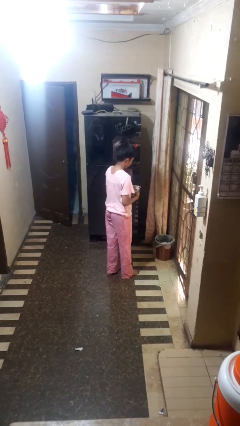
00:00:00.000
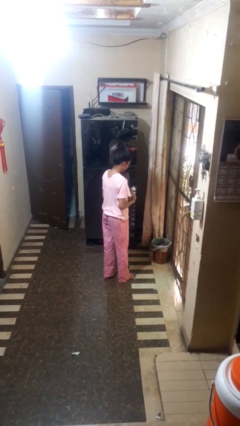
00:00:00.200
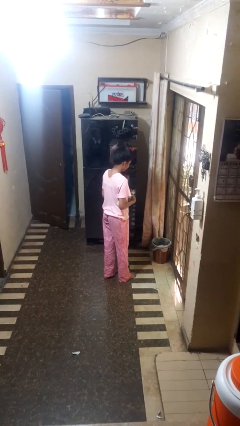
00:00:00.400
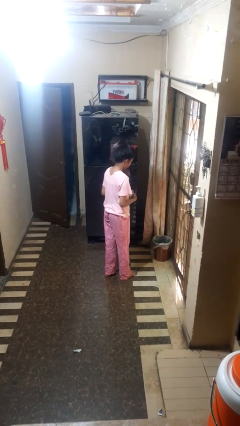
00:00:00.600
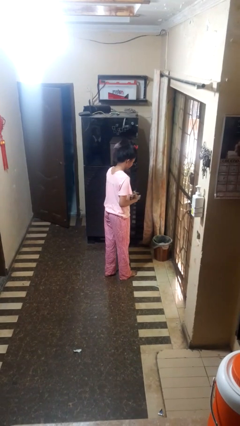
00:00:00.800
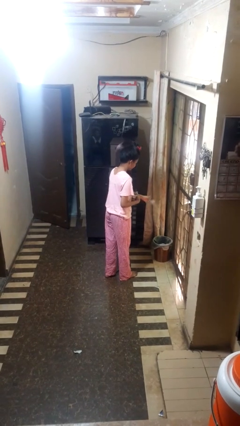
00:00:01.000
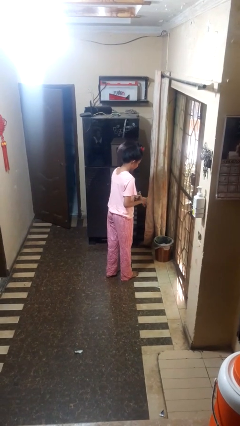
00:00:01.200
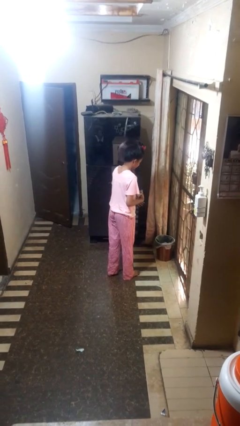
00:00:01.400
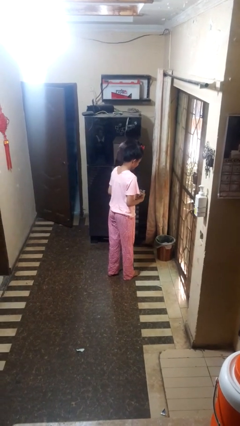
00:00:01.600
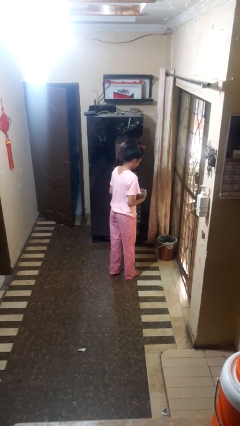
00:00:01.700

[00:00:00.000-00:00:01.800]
person discards trash

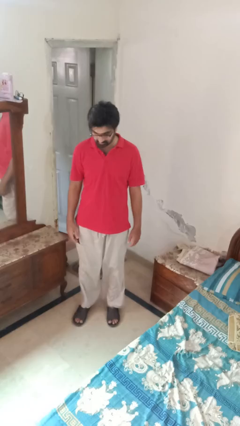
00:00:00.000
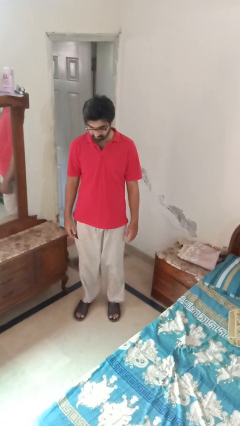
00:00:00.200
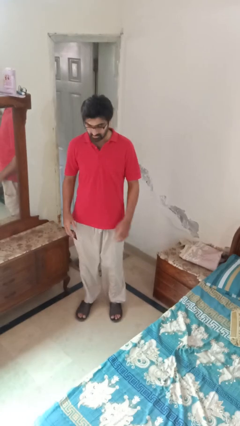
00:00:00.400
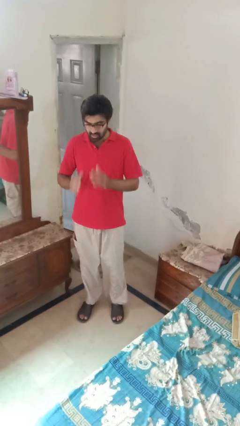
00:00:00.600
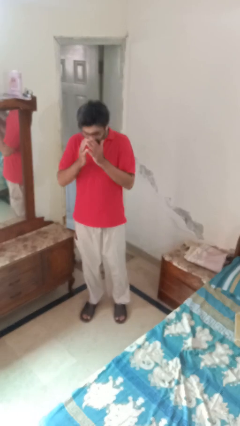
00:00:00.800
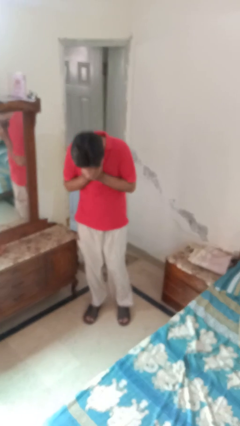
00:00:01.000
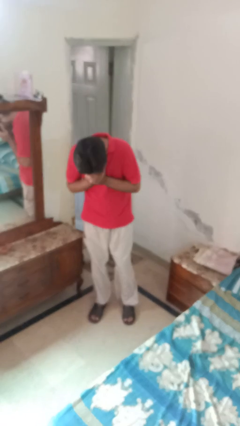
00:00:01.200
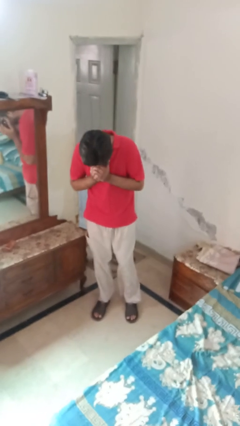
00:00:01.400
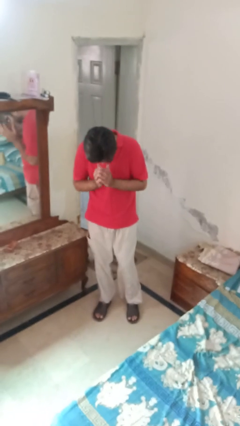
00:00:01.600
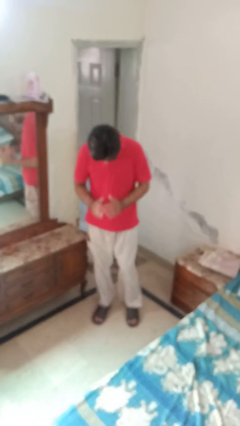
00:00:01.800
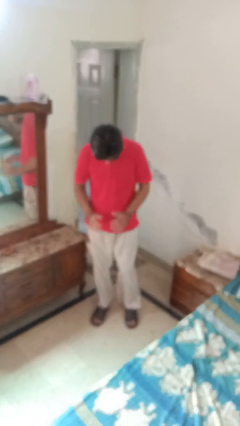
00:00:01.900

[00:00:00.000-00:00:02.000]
person sneezes into hand

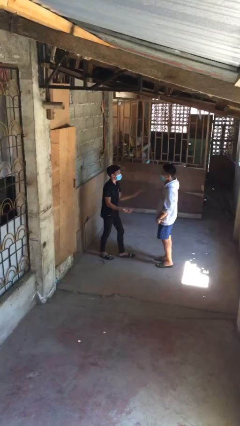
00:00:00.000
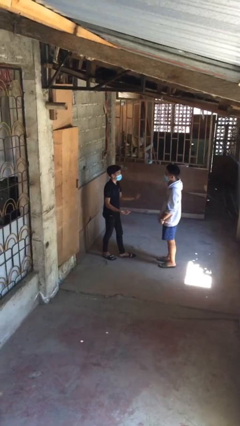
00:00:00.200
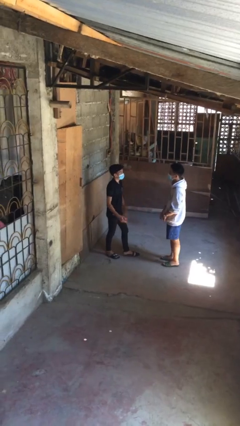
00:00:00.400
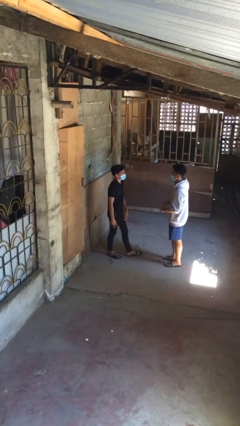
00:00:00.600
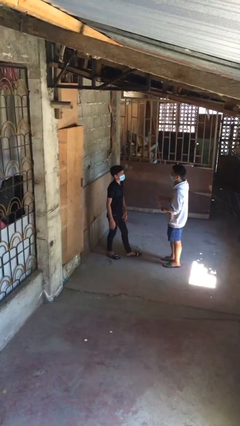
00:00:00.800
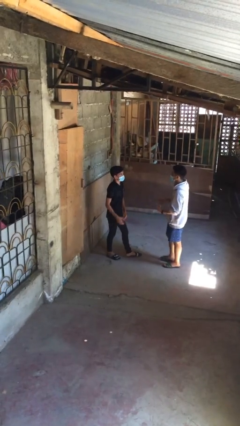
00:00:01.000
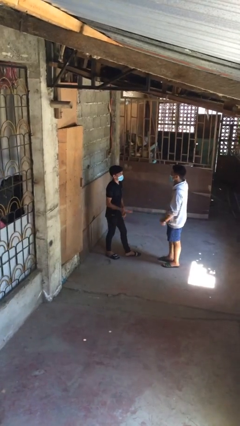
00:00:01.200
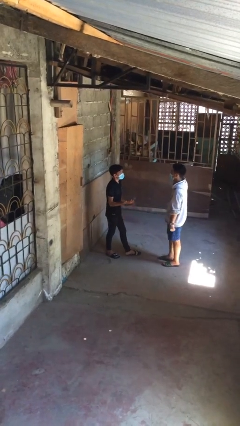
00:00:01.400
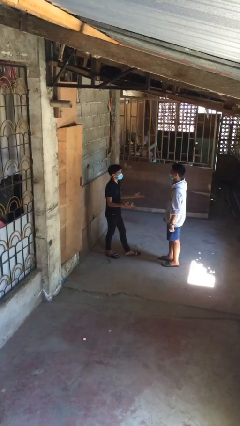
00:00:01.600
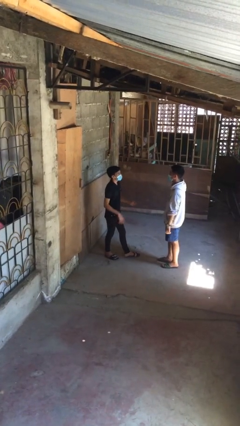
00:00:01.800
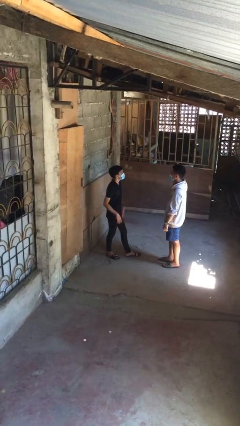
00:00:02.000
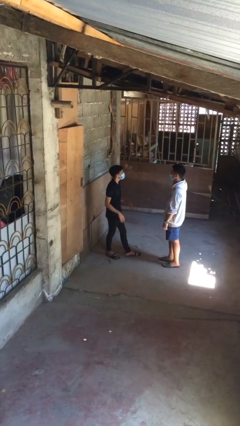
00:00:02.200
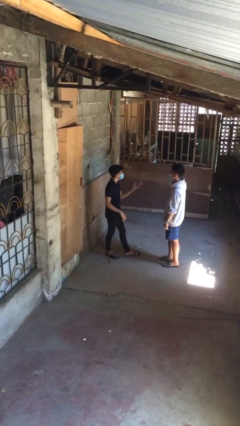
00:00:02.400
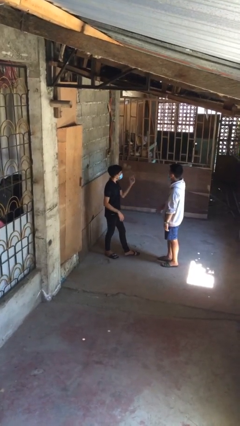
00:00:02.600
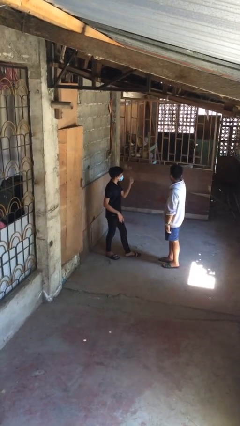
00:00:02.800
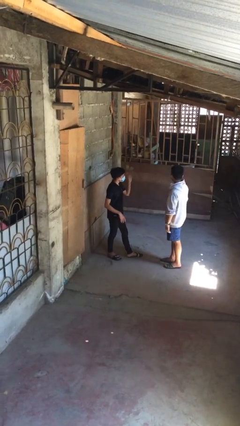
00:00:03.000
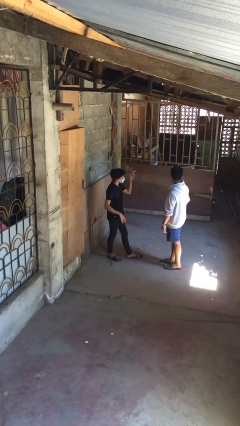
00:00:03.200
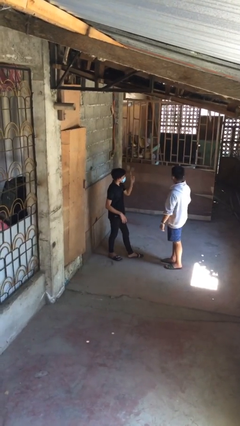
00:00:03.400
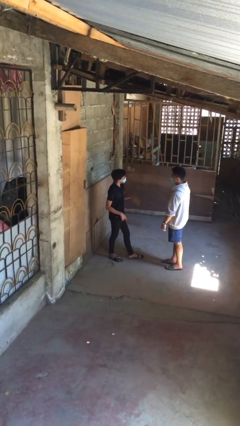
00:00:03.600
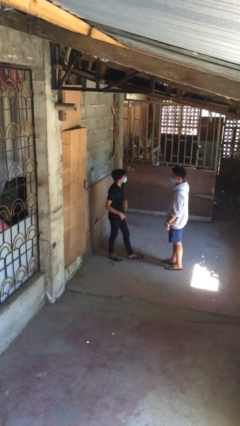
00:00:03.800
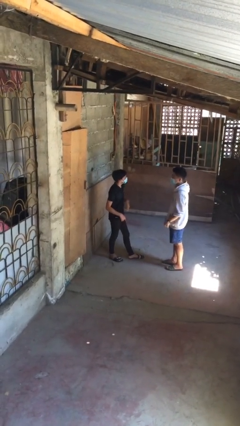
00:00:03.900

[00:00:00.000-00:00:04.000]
person talks to person

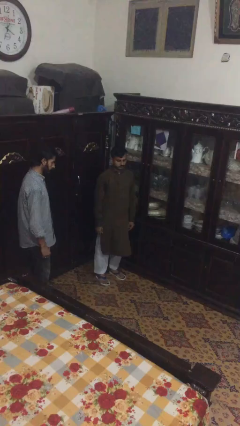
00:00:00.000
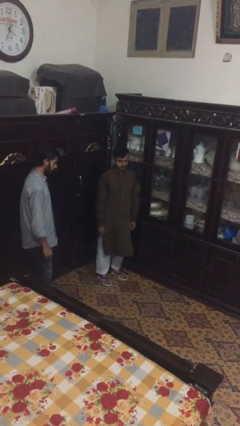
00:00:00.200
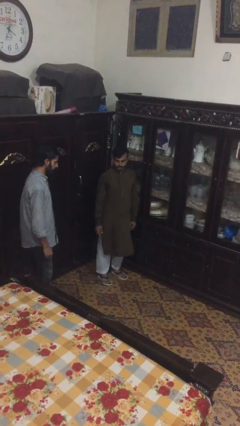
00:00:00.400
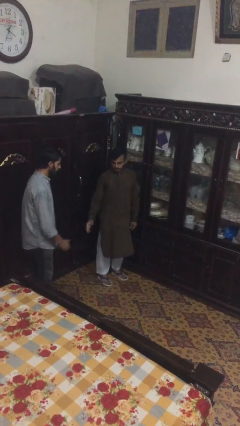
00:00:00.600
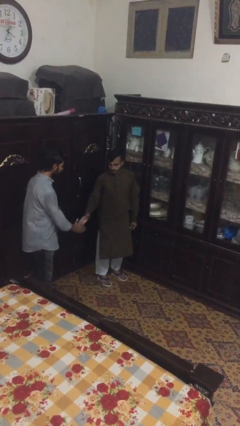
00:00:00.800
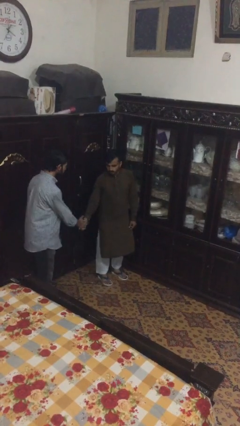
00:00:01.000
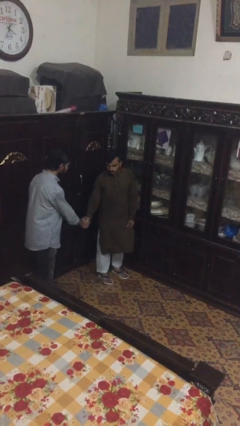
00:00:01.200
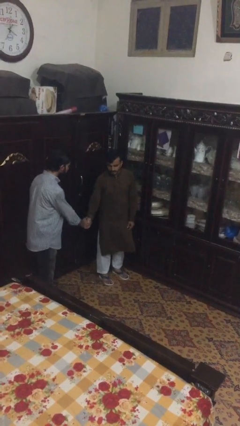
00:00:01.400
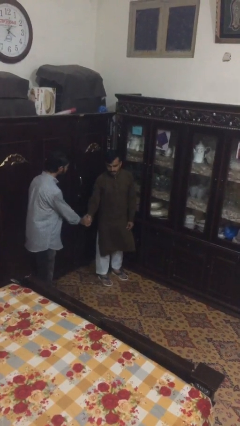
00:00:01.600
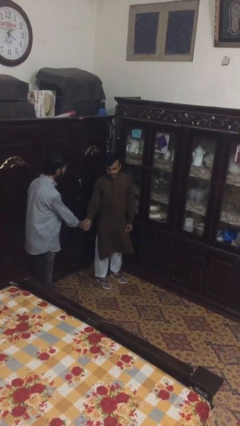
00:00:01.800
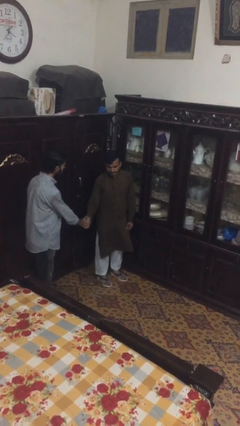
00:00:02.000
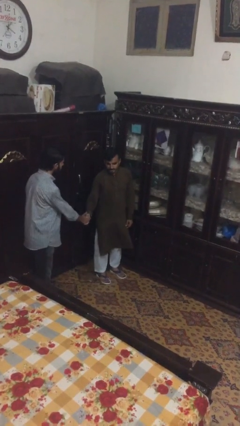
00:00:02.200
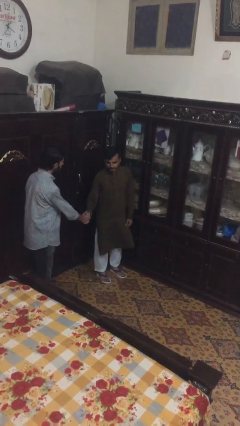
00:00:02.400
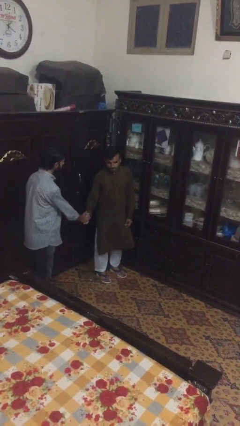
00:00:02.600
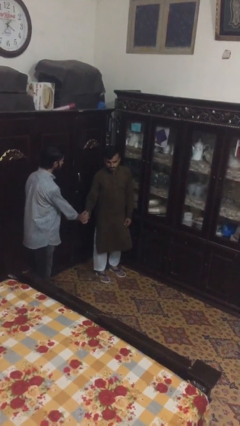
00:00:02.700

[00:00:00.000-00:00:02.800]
person shakes hand

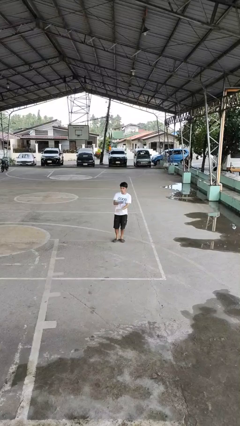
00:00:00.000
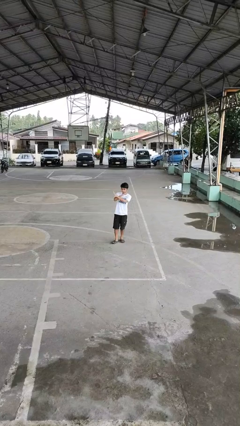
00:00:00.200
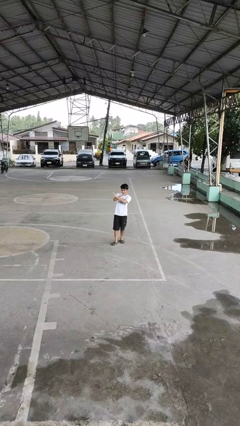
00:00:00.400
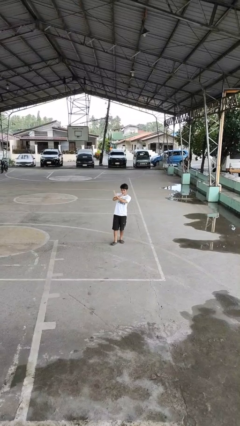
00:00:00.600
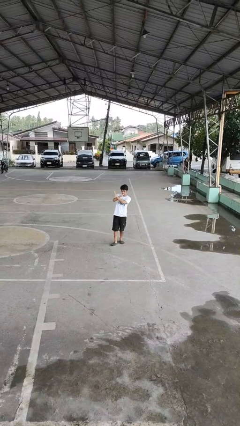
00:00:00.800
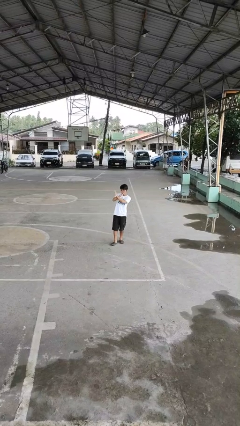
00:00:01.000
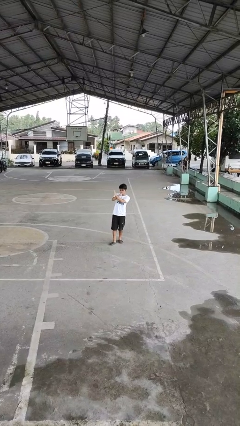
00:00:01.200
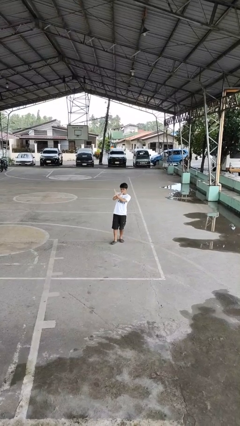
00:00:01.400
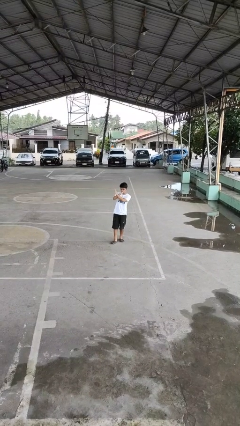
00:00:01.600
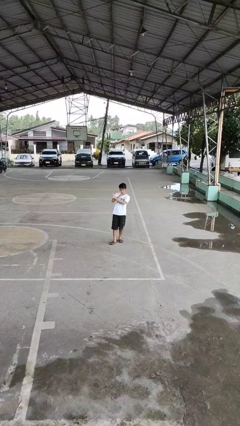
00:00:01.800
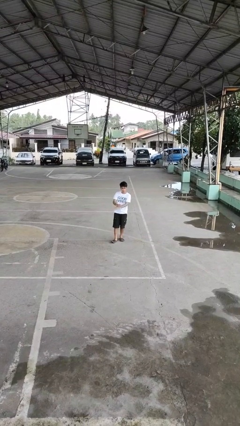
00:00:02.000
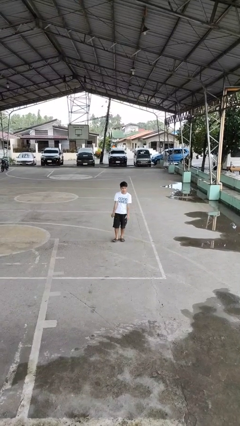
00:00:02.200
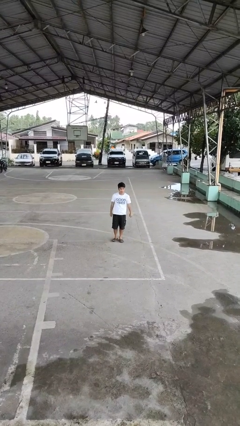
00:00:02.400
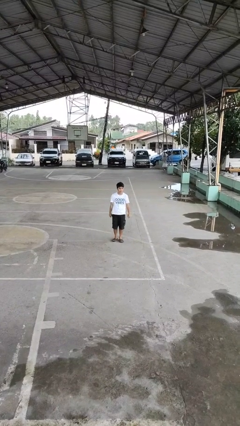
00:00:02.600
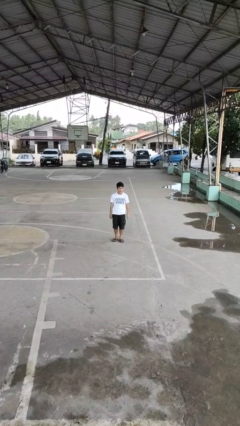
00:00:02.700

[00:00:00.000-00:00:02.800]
person gestures arms x

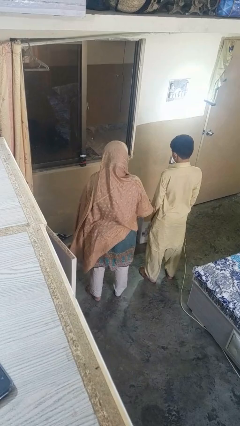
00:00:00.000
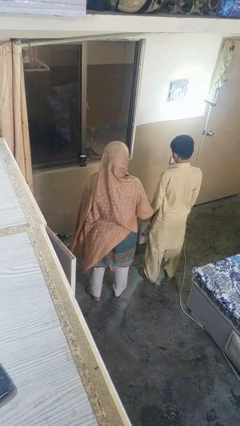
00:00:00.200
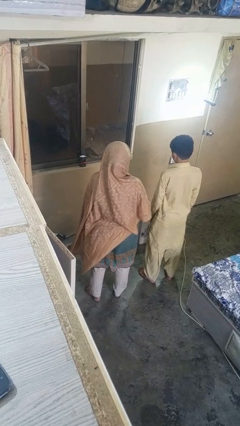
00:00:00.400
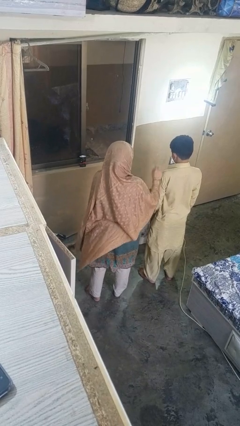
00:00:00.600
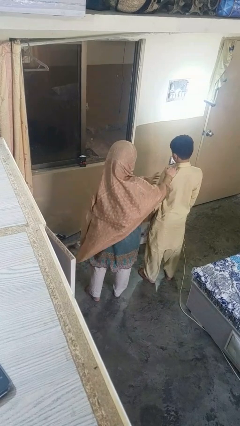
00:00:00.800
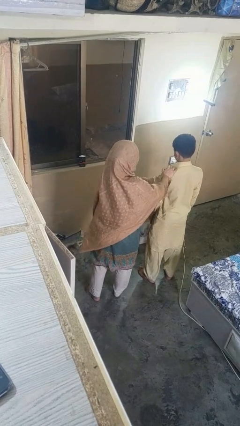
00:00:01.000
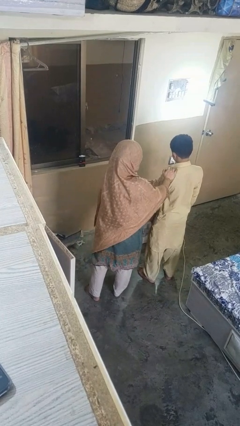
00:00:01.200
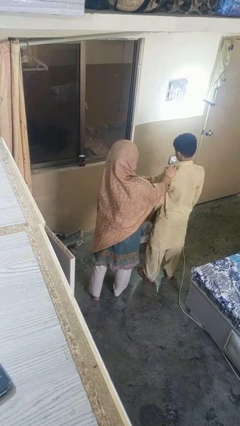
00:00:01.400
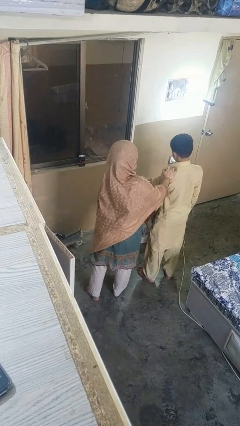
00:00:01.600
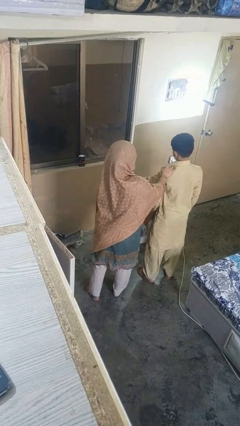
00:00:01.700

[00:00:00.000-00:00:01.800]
person shoves person

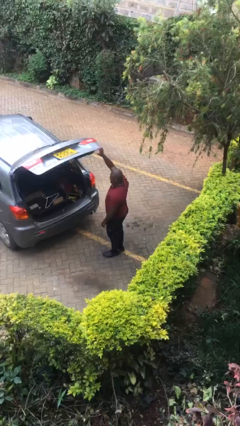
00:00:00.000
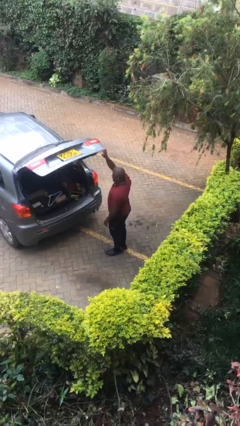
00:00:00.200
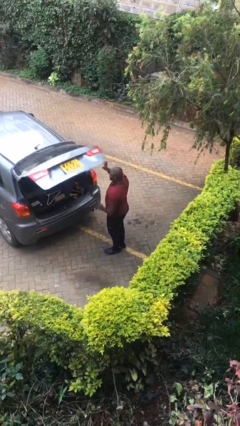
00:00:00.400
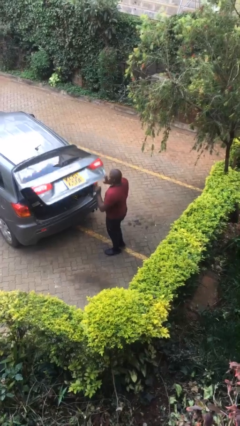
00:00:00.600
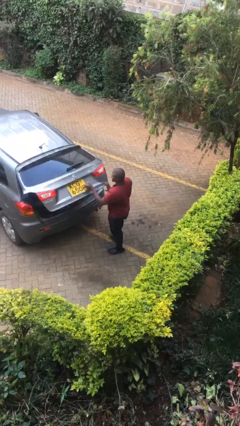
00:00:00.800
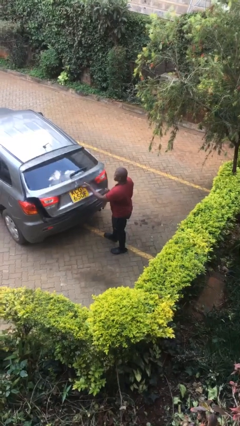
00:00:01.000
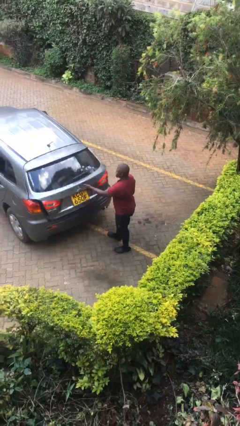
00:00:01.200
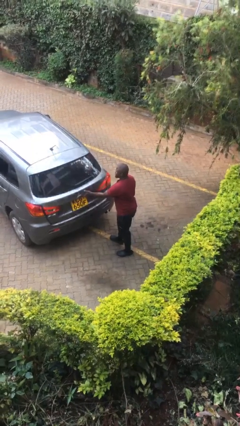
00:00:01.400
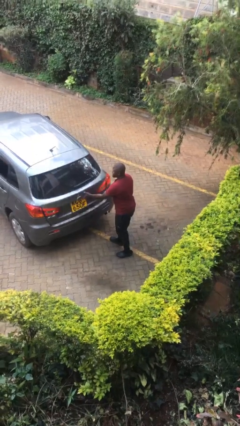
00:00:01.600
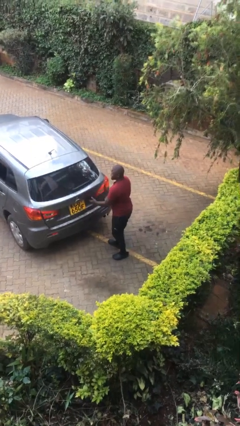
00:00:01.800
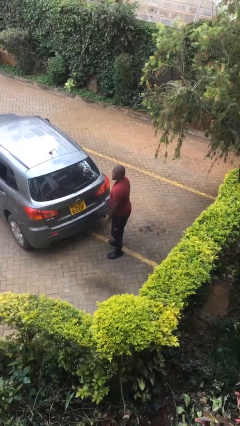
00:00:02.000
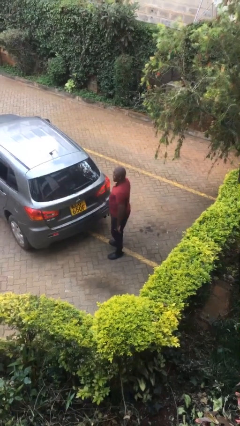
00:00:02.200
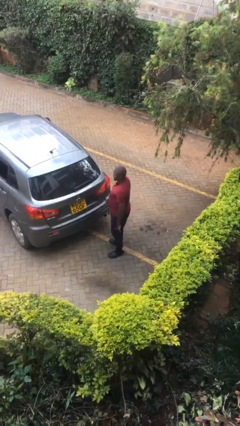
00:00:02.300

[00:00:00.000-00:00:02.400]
person closes car trunk
